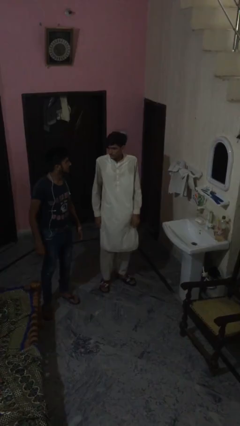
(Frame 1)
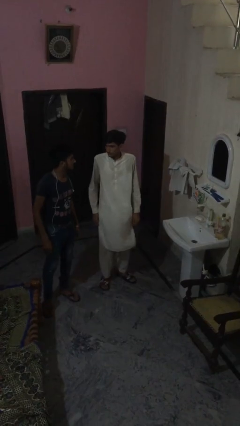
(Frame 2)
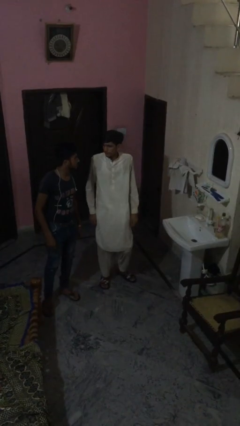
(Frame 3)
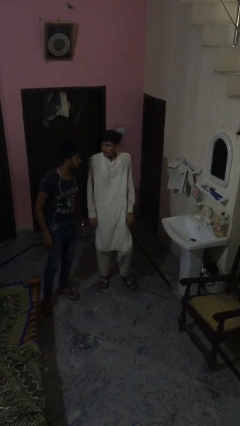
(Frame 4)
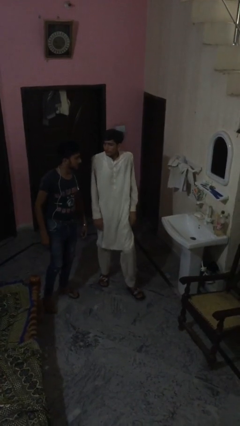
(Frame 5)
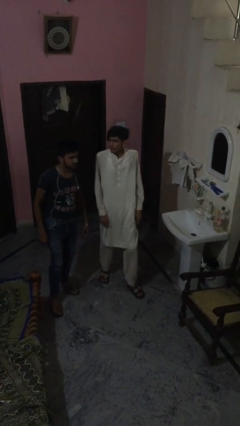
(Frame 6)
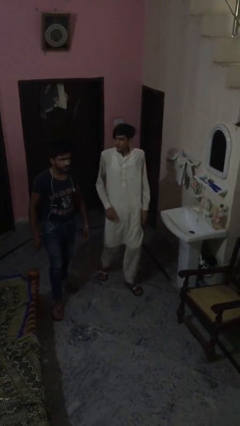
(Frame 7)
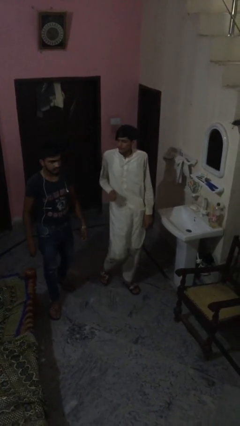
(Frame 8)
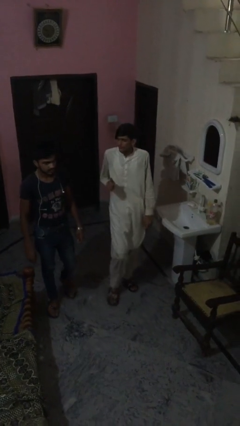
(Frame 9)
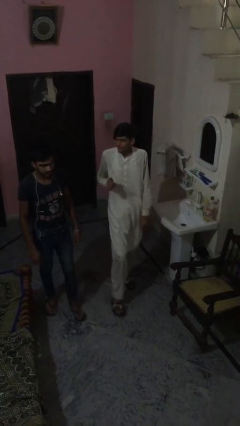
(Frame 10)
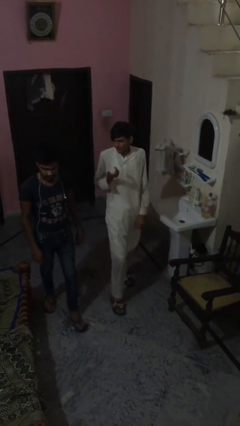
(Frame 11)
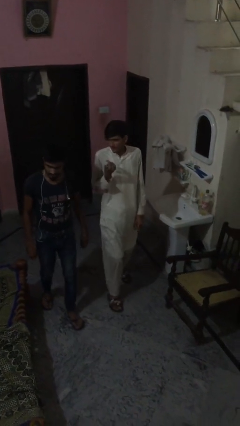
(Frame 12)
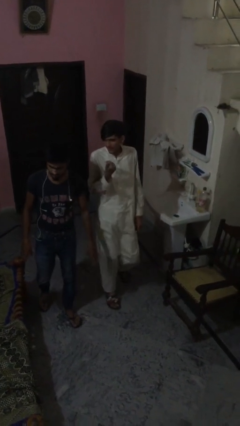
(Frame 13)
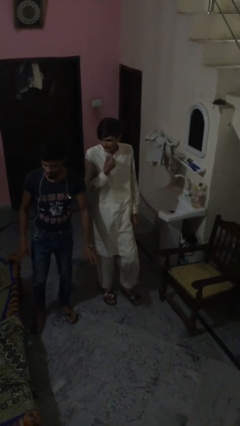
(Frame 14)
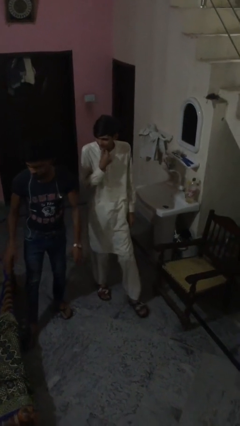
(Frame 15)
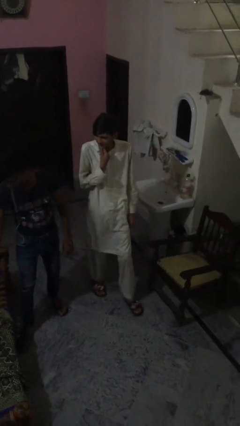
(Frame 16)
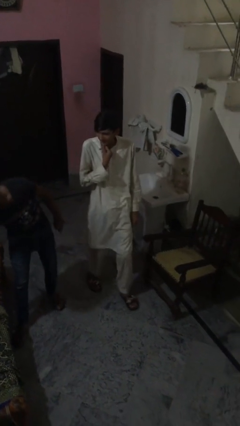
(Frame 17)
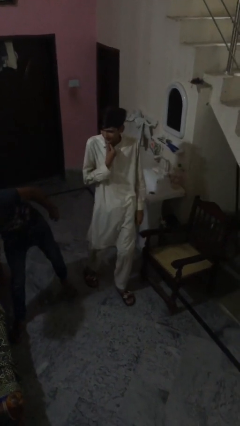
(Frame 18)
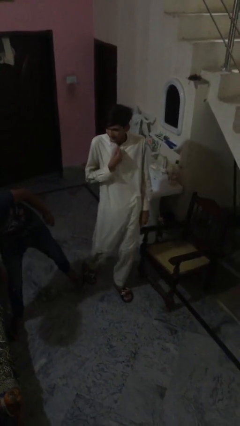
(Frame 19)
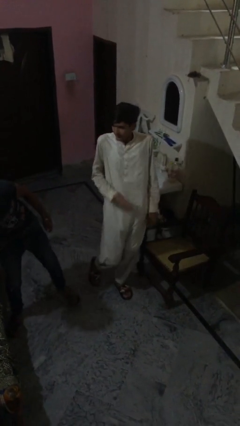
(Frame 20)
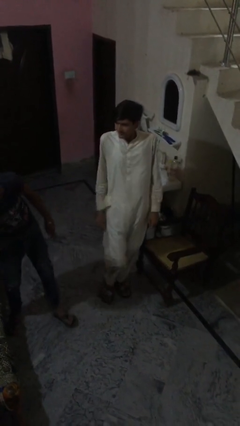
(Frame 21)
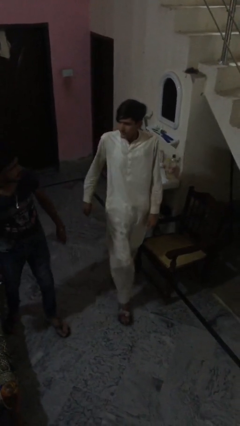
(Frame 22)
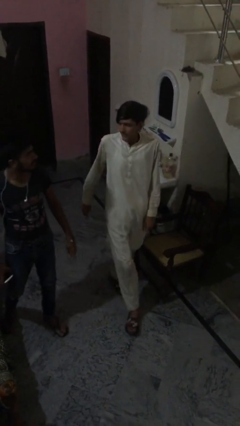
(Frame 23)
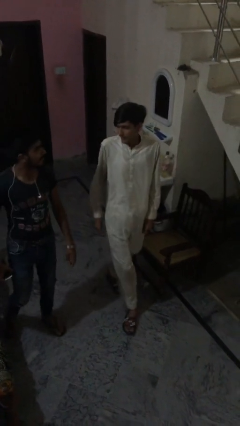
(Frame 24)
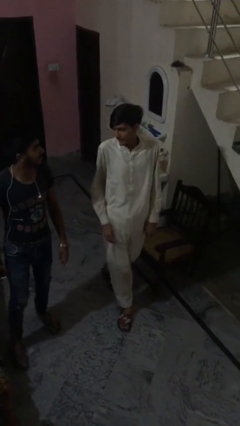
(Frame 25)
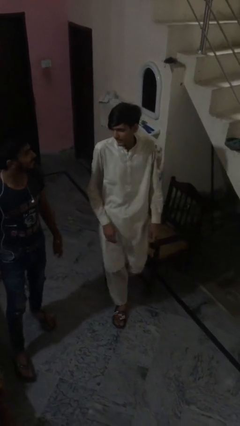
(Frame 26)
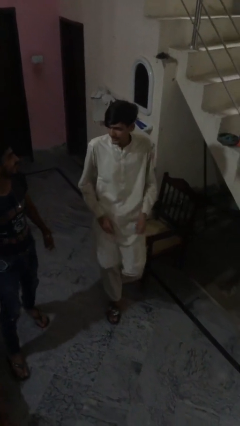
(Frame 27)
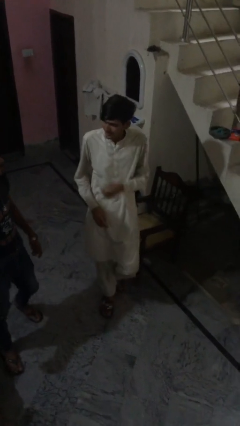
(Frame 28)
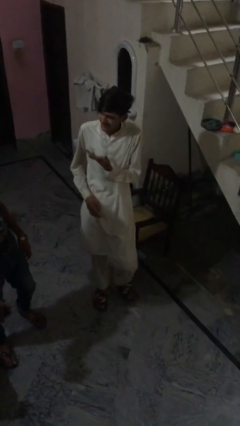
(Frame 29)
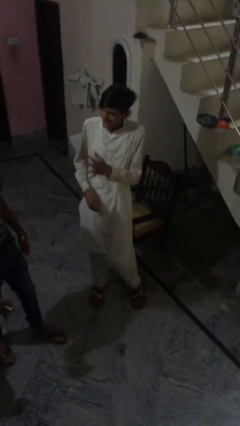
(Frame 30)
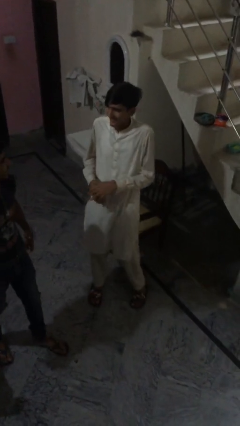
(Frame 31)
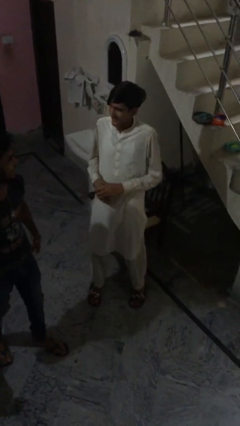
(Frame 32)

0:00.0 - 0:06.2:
person talks to person

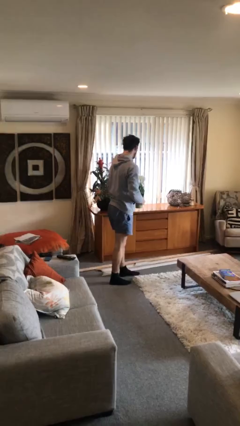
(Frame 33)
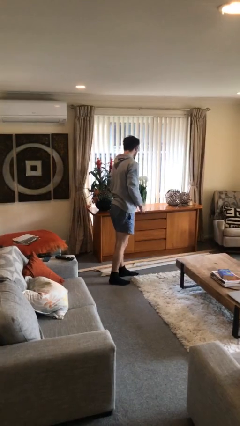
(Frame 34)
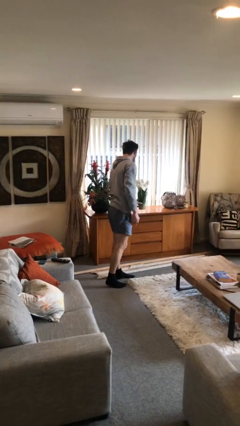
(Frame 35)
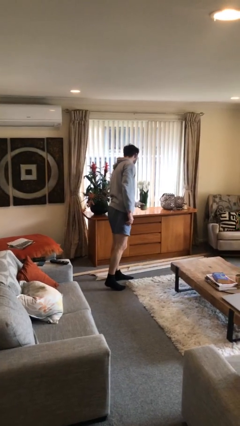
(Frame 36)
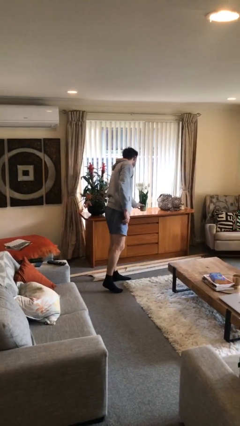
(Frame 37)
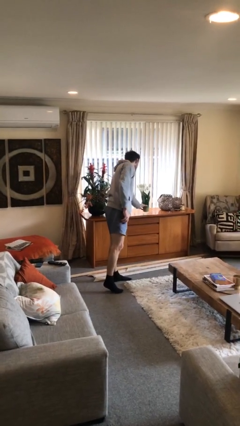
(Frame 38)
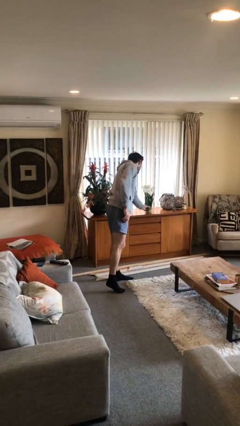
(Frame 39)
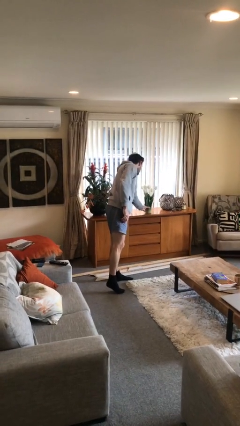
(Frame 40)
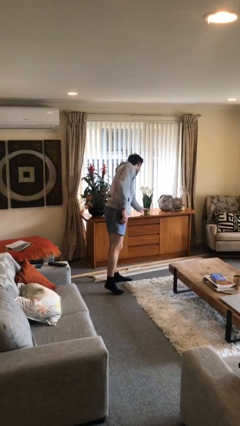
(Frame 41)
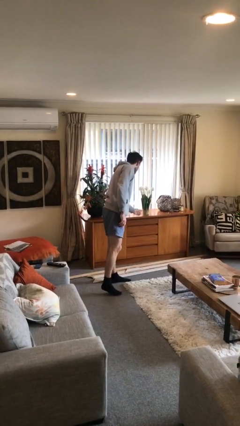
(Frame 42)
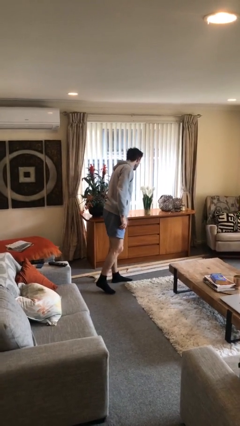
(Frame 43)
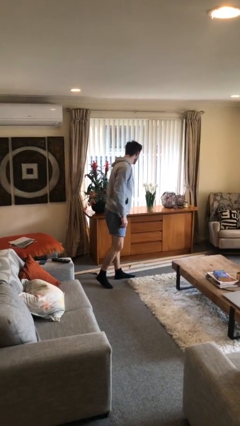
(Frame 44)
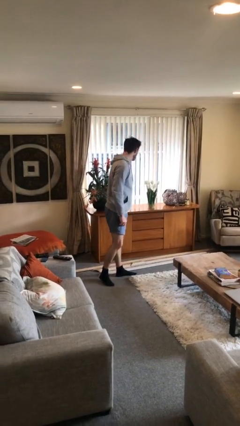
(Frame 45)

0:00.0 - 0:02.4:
person puts down object on table

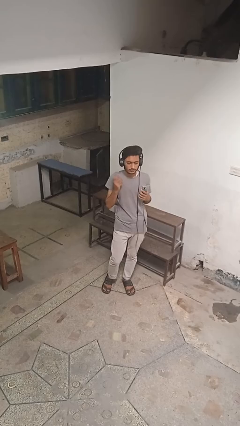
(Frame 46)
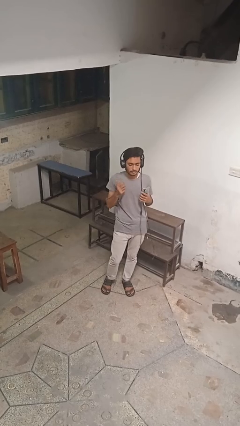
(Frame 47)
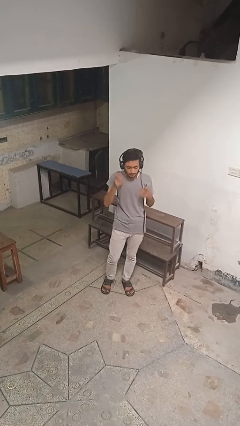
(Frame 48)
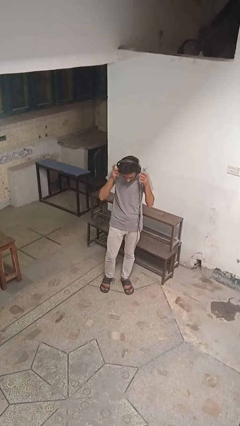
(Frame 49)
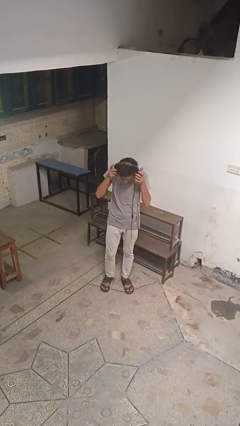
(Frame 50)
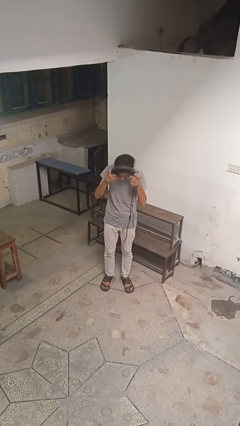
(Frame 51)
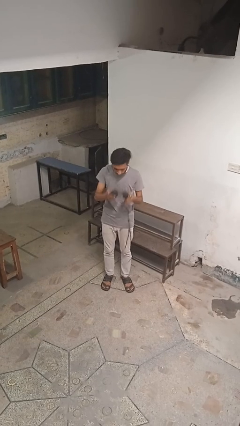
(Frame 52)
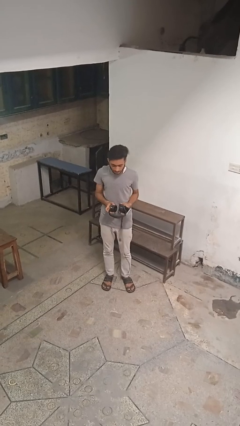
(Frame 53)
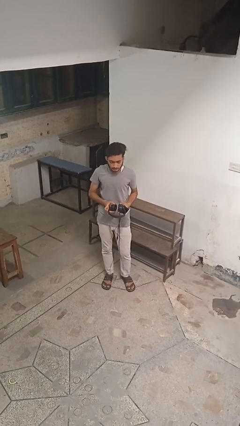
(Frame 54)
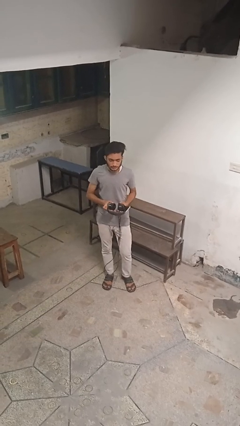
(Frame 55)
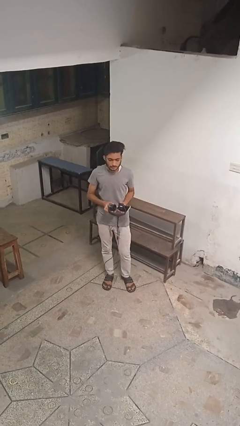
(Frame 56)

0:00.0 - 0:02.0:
person takes off headphones

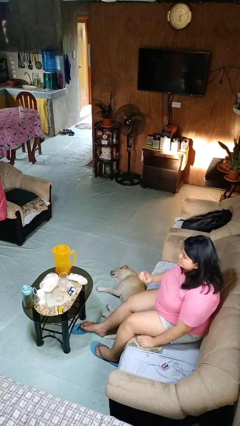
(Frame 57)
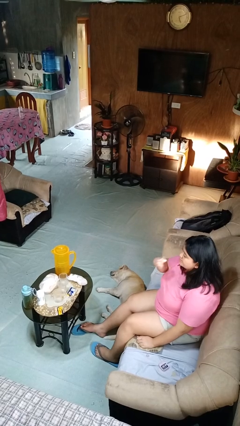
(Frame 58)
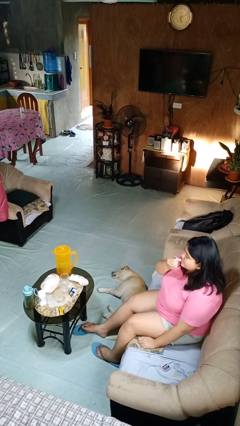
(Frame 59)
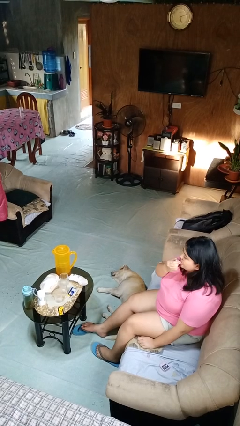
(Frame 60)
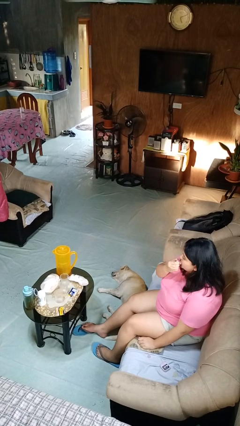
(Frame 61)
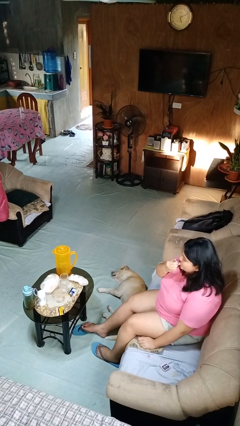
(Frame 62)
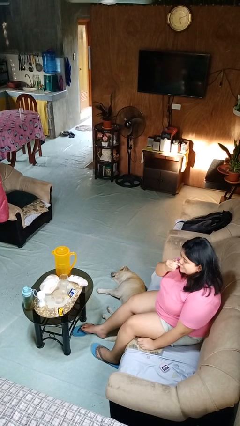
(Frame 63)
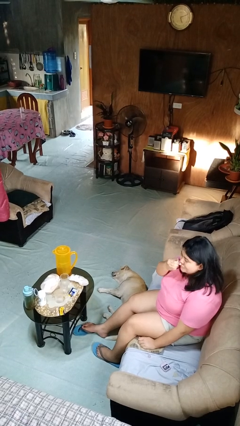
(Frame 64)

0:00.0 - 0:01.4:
person applies lip makeup

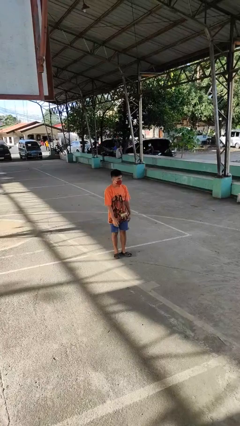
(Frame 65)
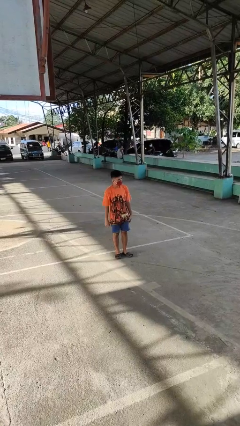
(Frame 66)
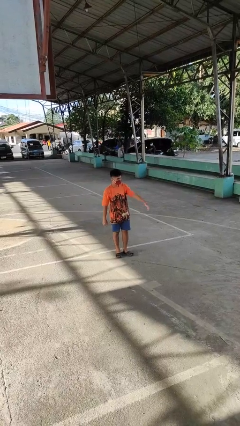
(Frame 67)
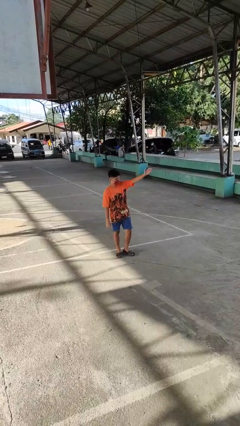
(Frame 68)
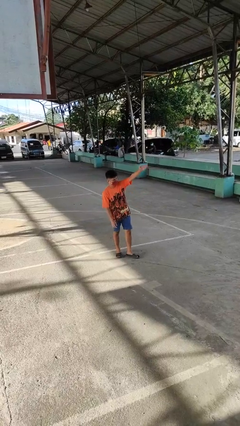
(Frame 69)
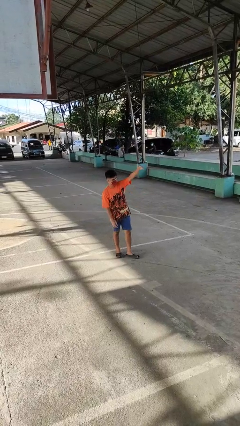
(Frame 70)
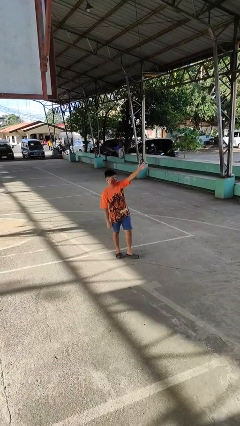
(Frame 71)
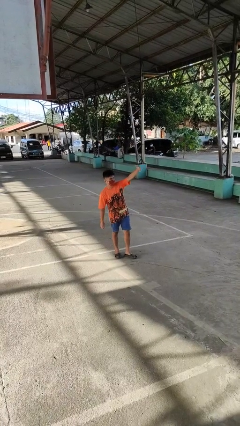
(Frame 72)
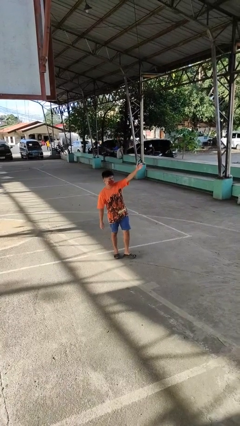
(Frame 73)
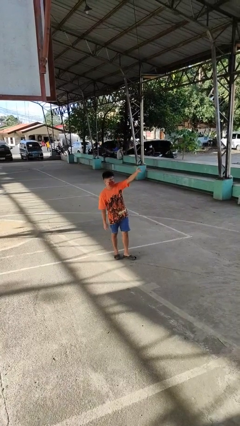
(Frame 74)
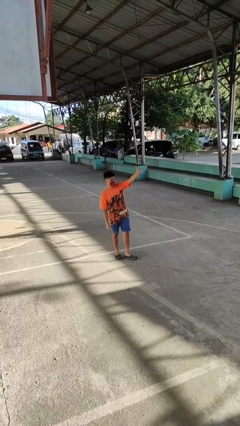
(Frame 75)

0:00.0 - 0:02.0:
person gestures come here

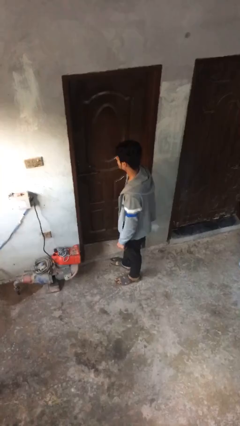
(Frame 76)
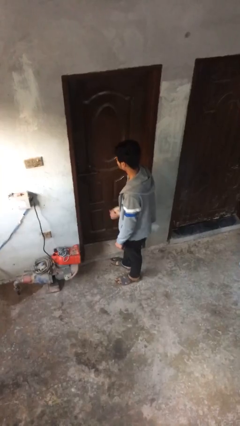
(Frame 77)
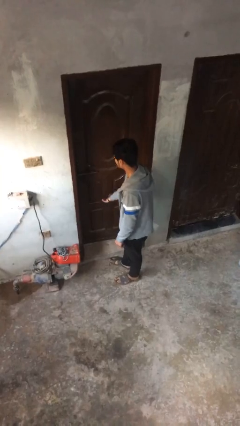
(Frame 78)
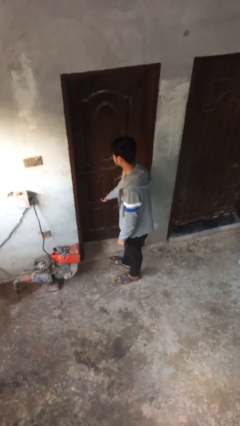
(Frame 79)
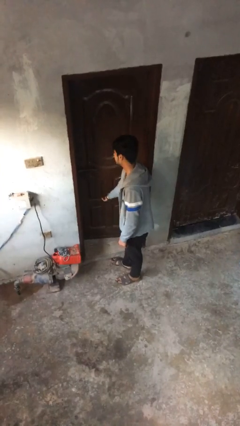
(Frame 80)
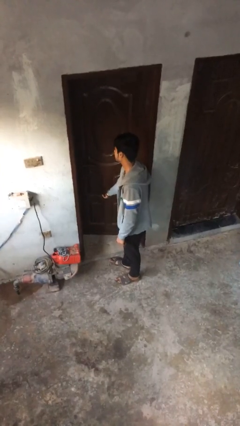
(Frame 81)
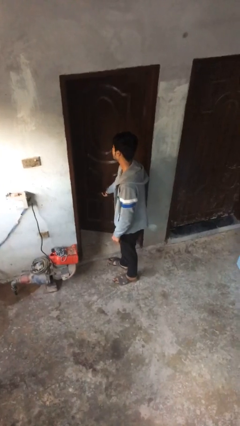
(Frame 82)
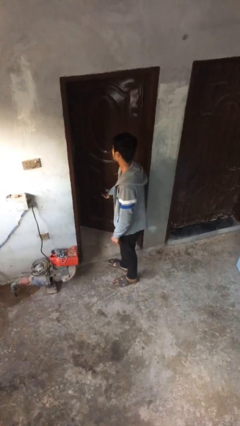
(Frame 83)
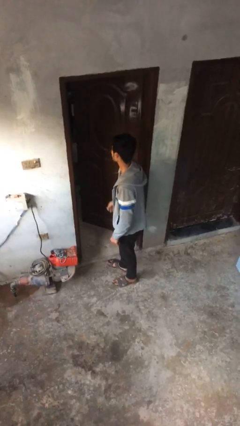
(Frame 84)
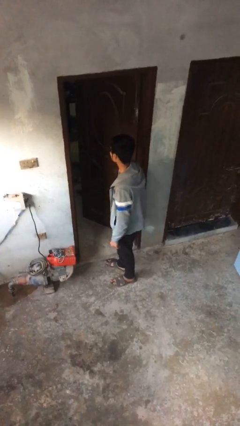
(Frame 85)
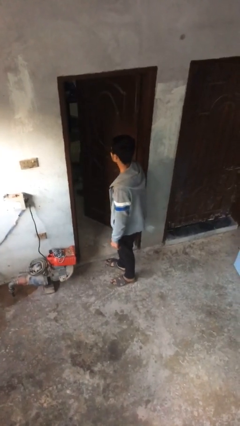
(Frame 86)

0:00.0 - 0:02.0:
person opens facility door

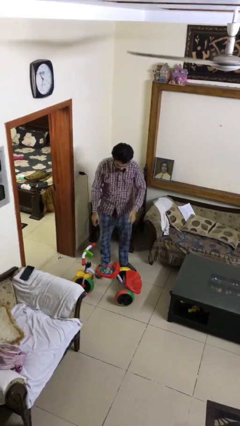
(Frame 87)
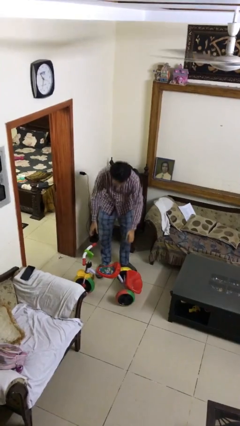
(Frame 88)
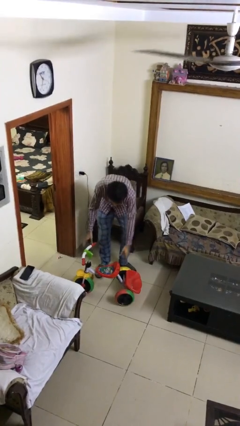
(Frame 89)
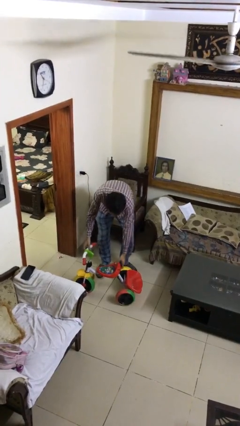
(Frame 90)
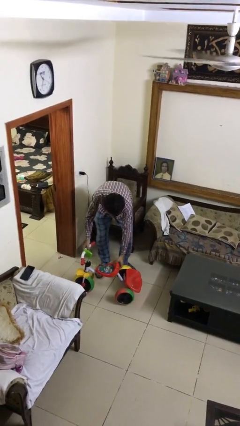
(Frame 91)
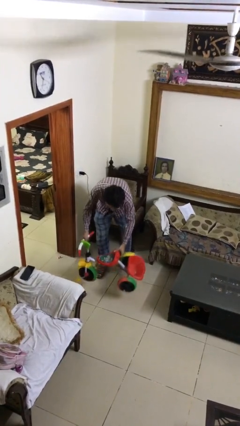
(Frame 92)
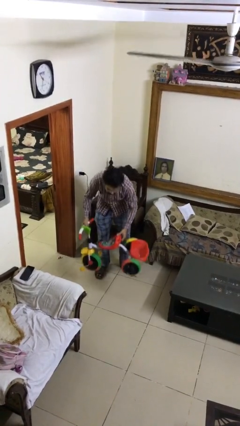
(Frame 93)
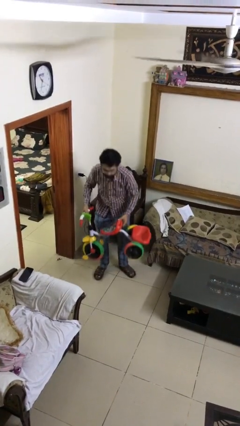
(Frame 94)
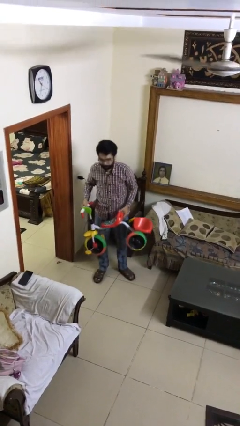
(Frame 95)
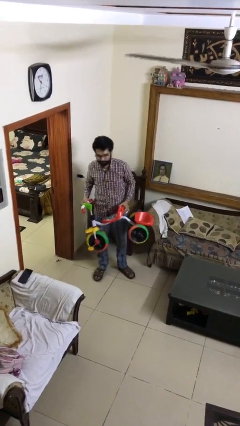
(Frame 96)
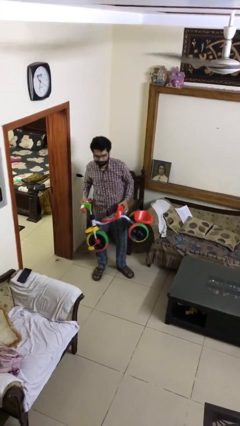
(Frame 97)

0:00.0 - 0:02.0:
person picks up object from floor
